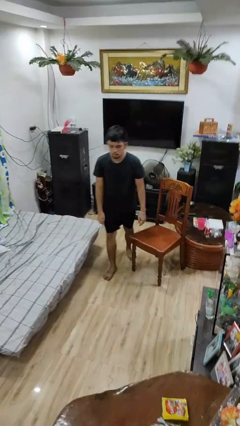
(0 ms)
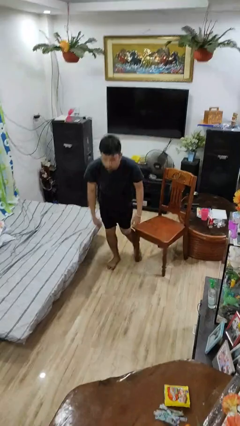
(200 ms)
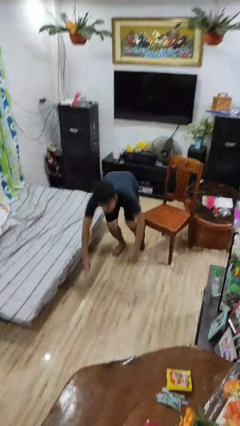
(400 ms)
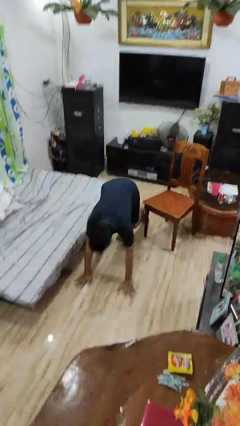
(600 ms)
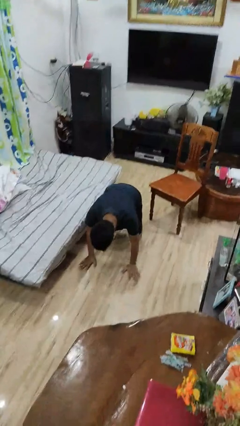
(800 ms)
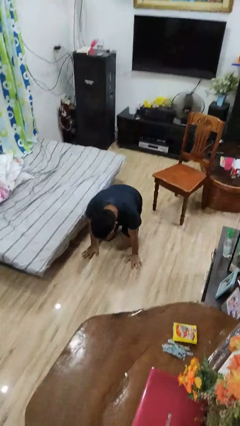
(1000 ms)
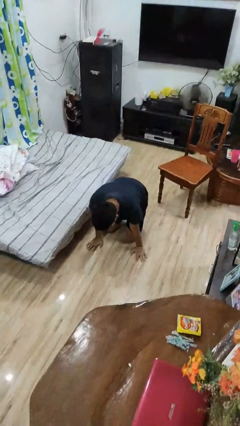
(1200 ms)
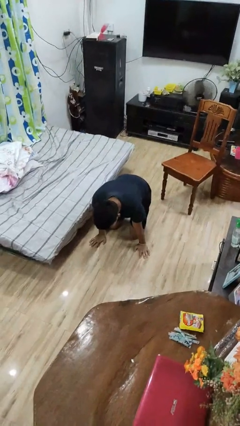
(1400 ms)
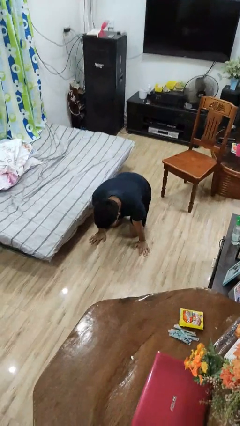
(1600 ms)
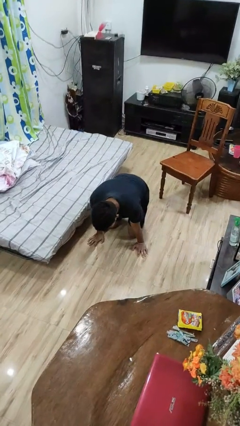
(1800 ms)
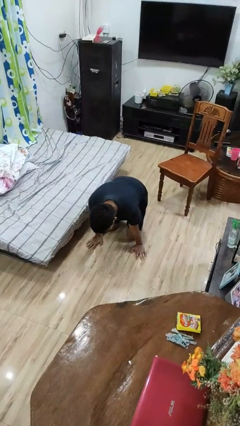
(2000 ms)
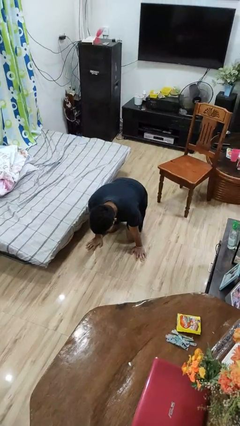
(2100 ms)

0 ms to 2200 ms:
person trips on object on floor

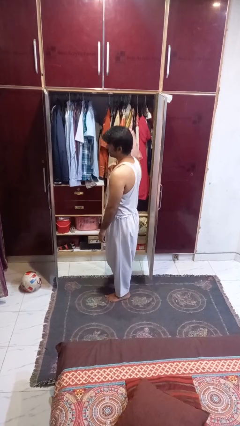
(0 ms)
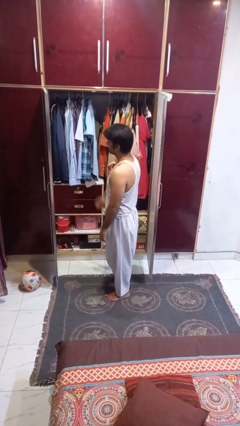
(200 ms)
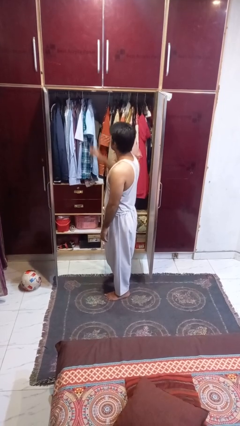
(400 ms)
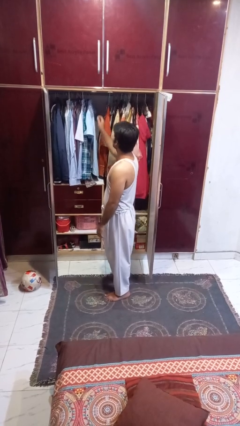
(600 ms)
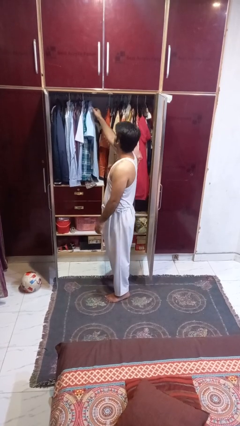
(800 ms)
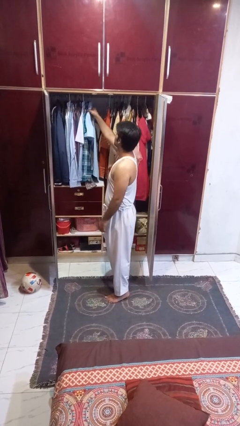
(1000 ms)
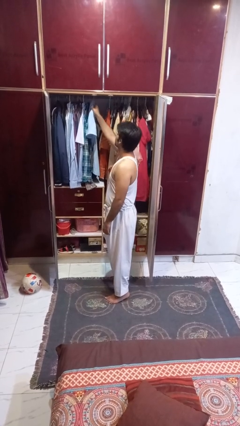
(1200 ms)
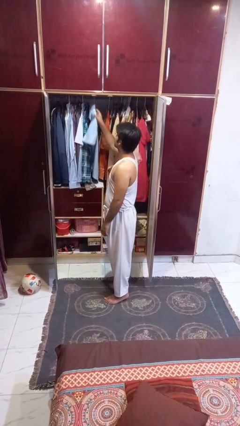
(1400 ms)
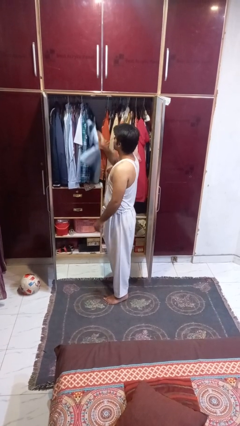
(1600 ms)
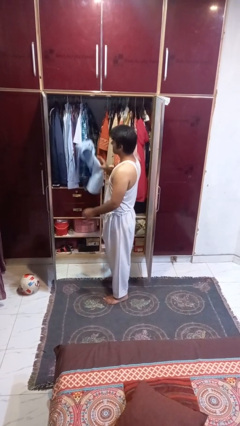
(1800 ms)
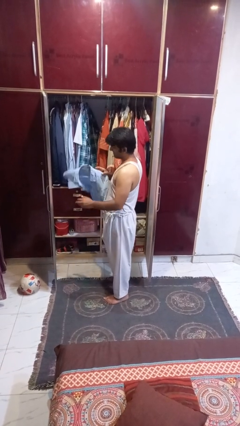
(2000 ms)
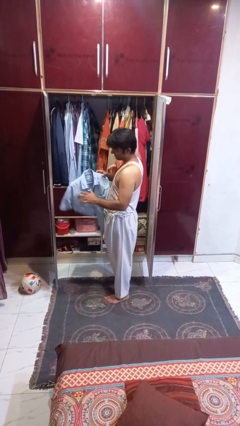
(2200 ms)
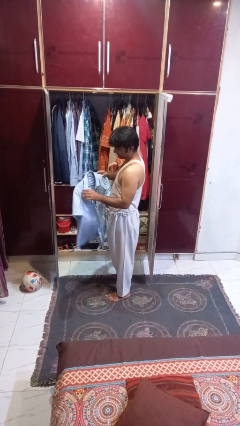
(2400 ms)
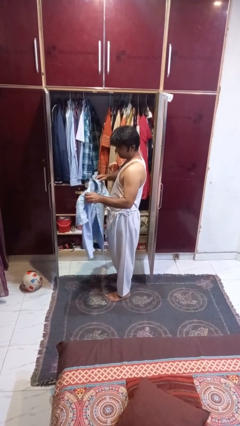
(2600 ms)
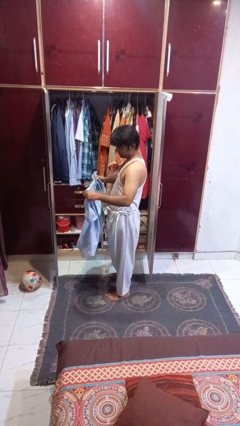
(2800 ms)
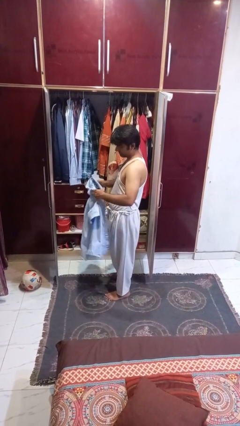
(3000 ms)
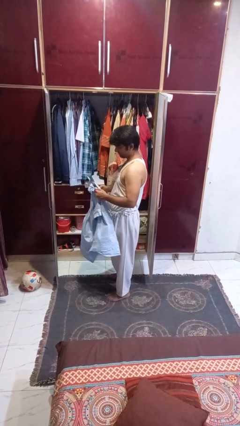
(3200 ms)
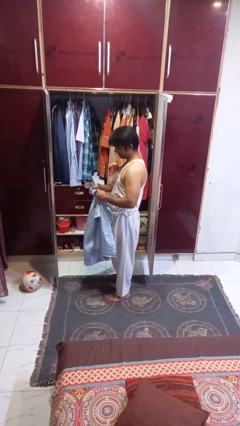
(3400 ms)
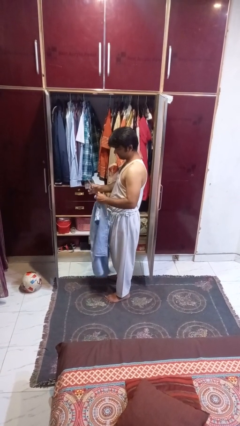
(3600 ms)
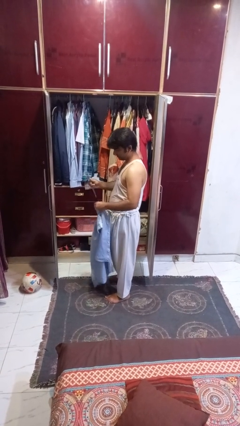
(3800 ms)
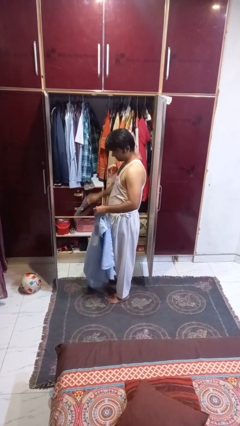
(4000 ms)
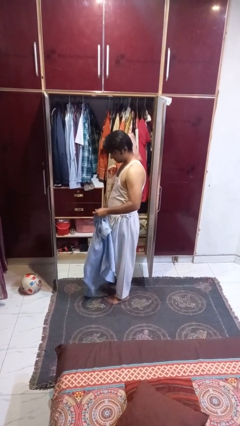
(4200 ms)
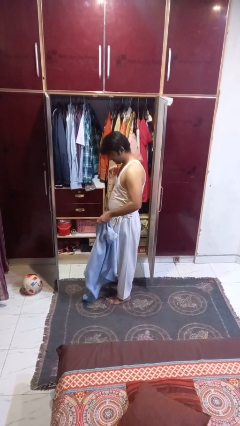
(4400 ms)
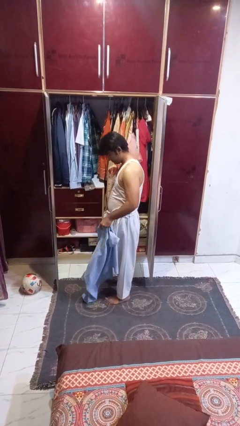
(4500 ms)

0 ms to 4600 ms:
person takes clothes from closet

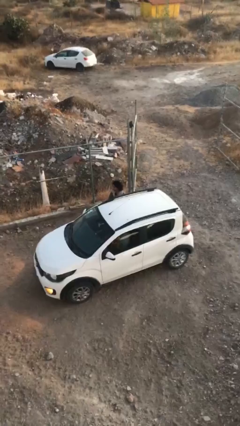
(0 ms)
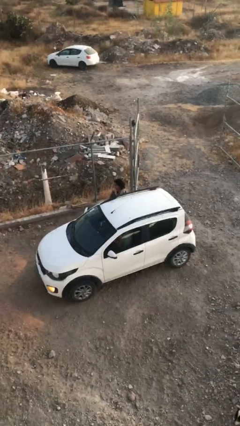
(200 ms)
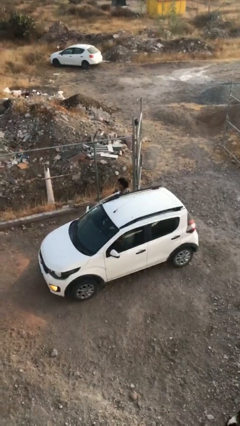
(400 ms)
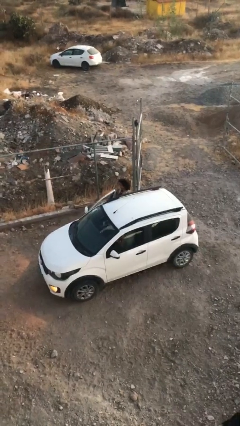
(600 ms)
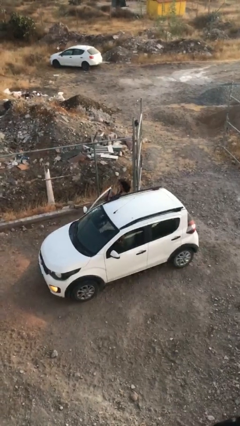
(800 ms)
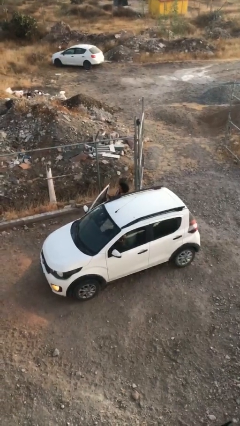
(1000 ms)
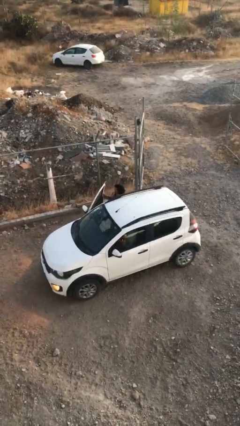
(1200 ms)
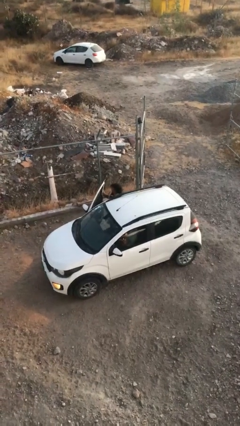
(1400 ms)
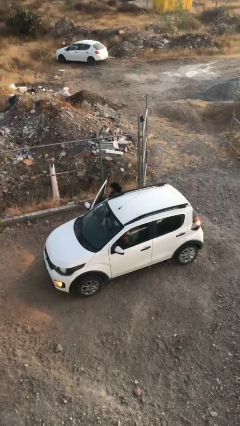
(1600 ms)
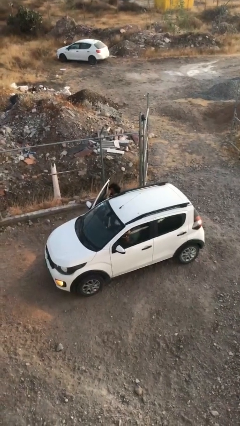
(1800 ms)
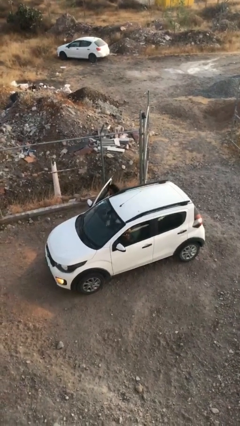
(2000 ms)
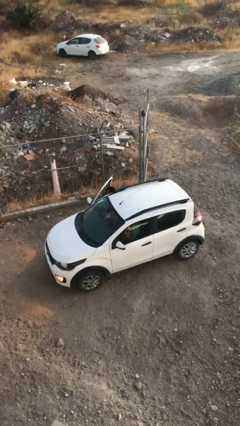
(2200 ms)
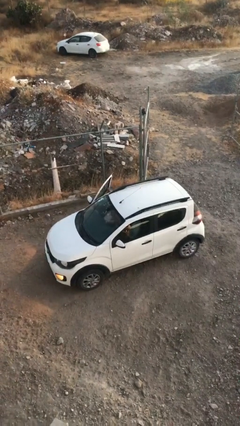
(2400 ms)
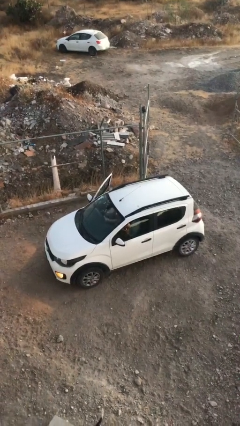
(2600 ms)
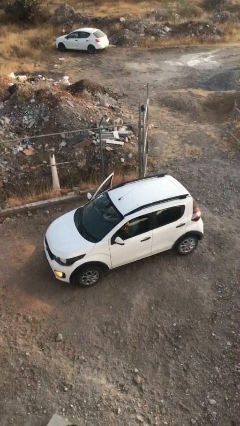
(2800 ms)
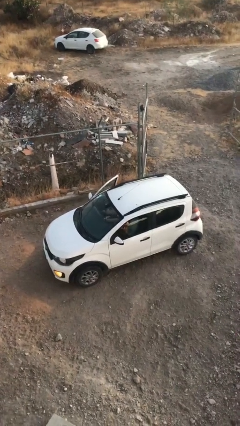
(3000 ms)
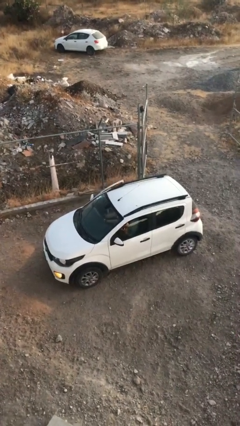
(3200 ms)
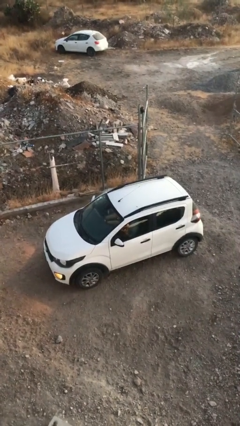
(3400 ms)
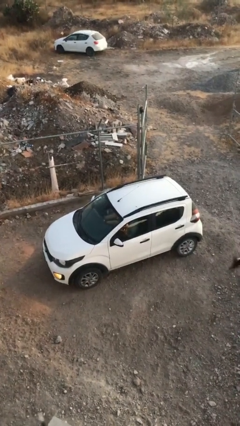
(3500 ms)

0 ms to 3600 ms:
car picks up person

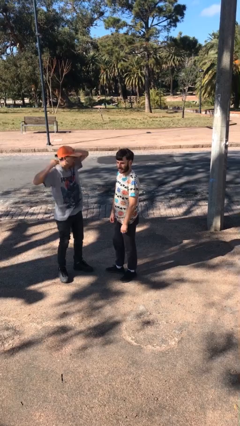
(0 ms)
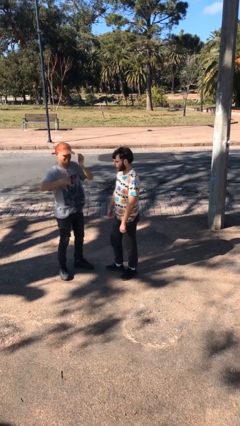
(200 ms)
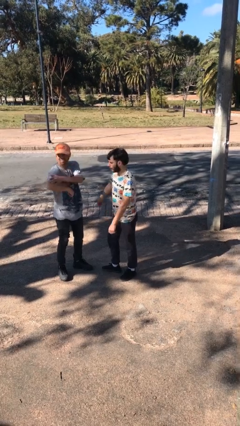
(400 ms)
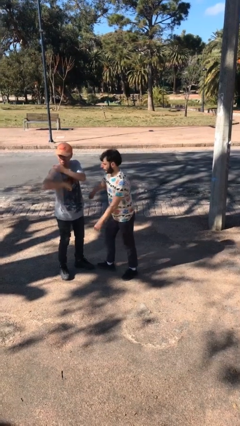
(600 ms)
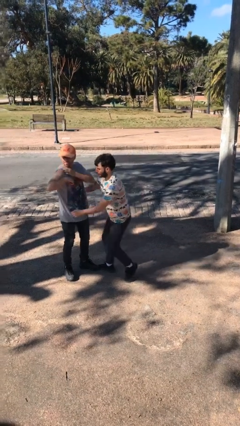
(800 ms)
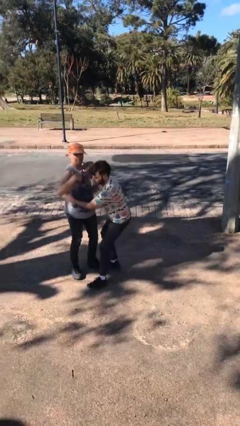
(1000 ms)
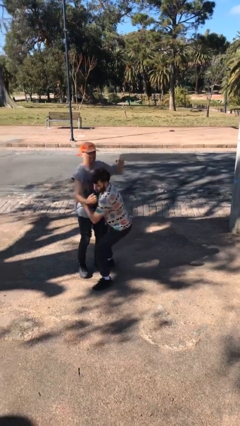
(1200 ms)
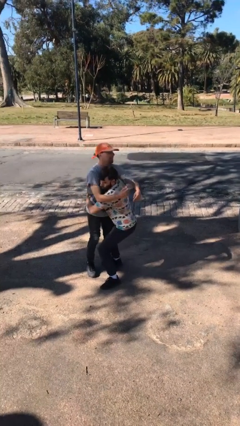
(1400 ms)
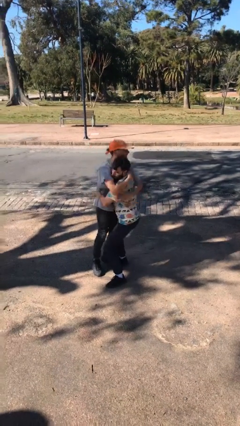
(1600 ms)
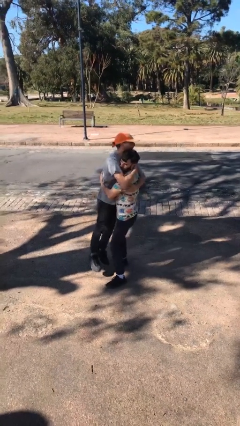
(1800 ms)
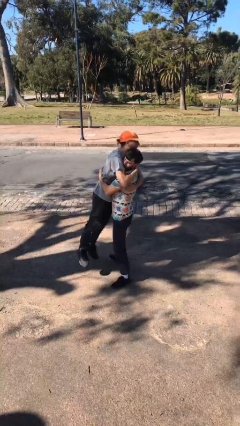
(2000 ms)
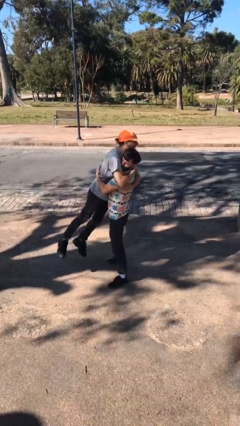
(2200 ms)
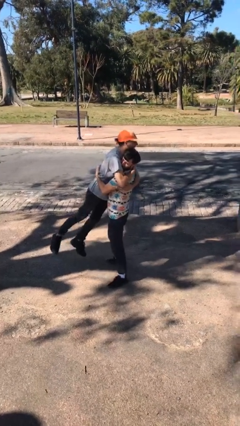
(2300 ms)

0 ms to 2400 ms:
person picks up person

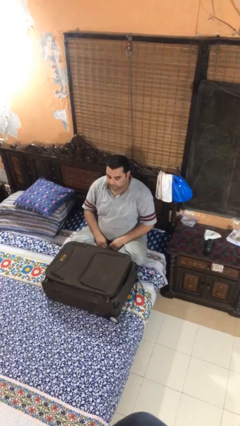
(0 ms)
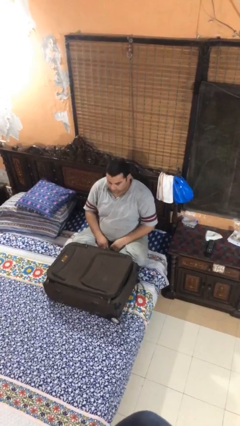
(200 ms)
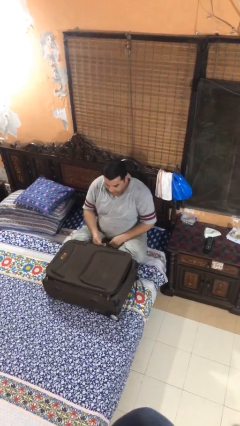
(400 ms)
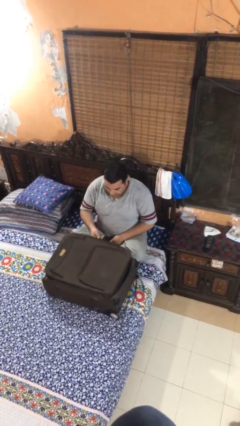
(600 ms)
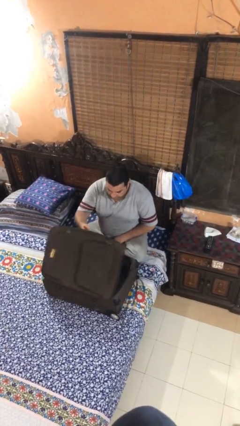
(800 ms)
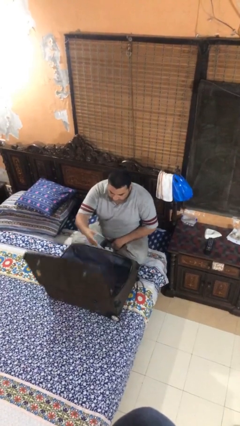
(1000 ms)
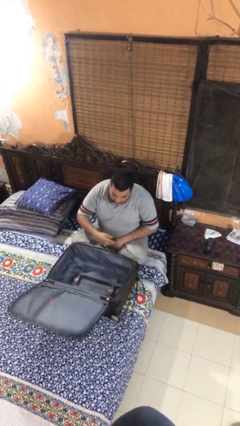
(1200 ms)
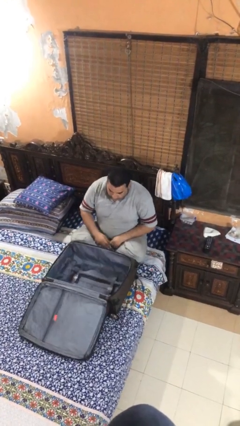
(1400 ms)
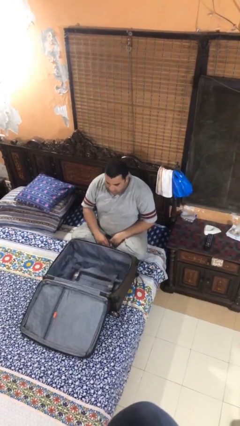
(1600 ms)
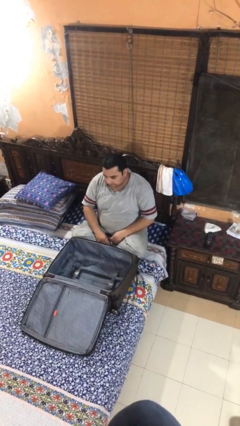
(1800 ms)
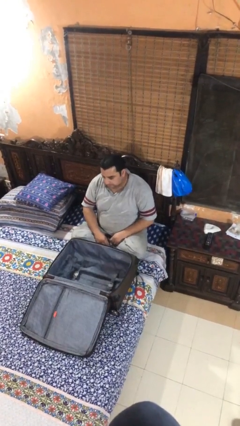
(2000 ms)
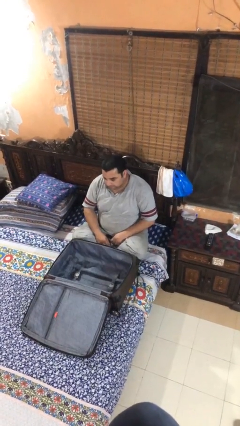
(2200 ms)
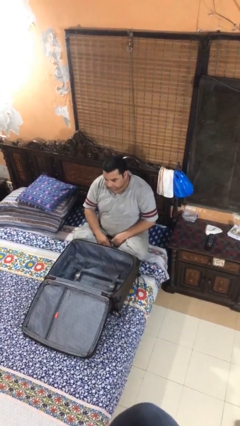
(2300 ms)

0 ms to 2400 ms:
person opens suitcase

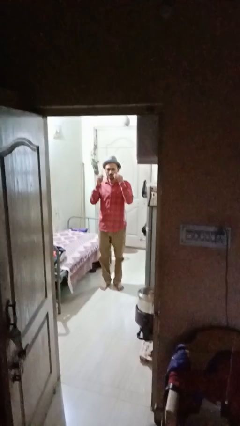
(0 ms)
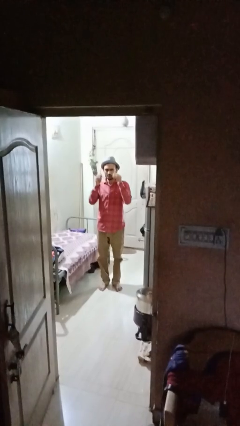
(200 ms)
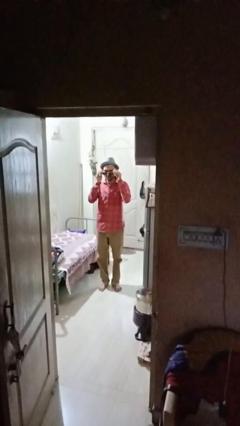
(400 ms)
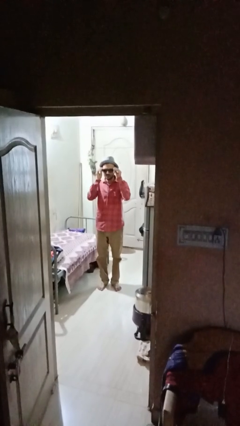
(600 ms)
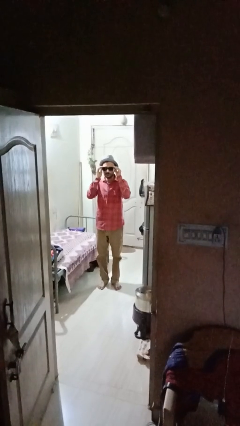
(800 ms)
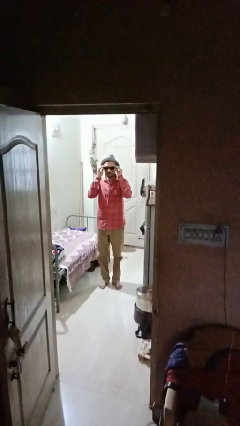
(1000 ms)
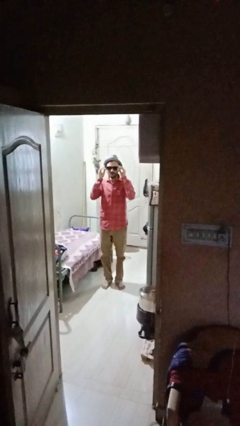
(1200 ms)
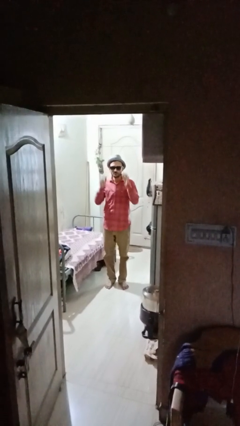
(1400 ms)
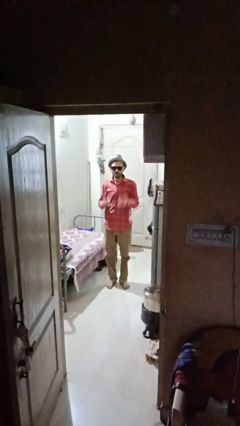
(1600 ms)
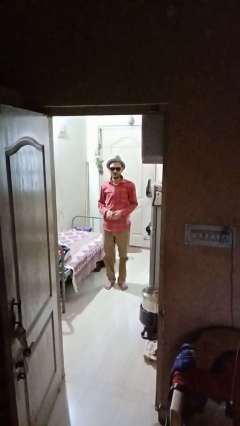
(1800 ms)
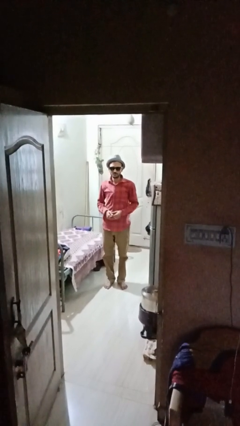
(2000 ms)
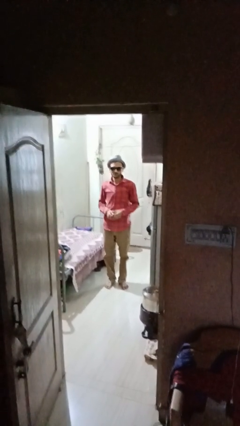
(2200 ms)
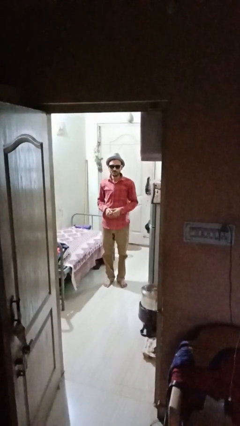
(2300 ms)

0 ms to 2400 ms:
person puts on sunglasses
